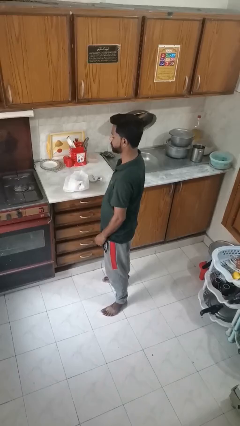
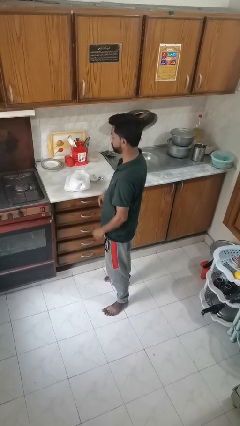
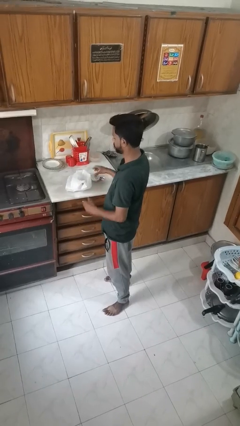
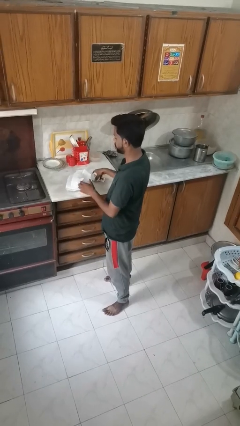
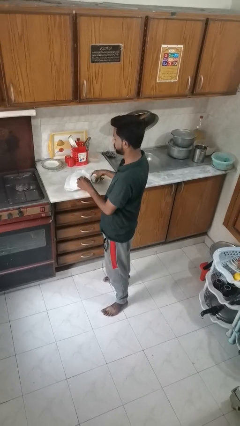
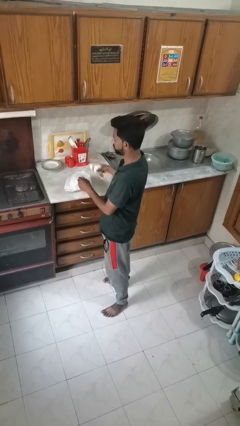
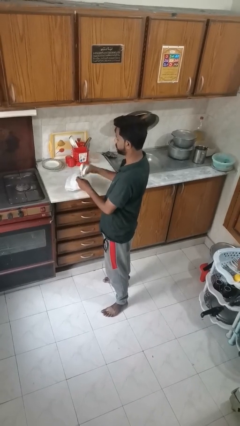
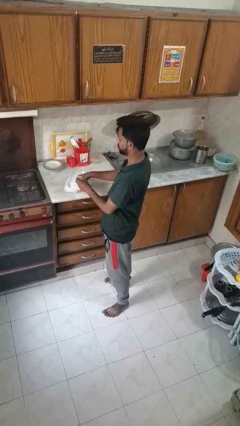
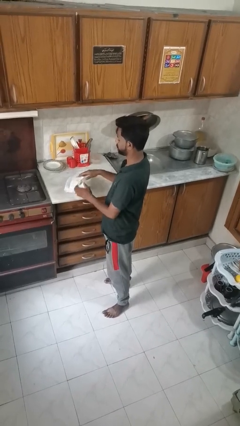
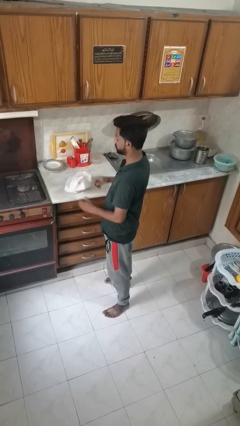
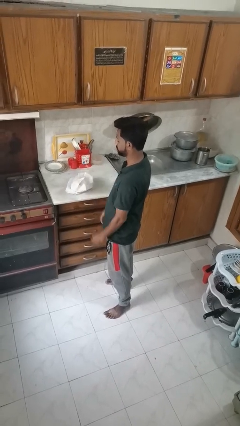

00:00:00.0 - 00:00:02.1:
person puts object into bag

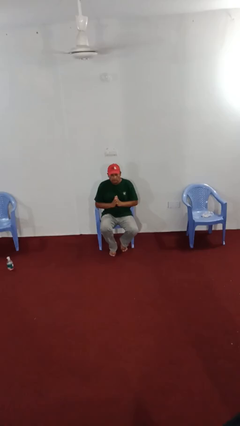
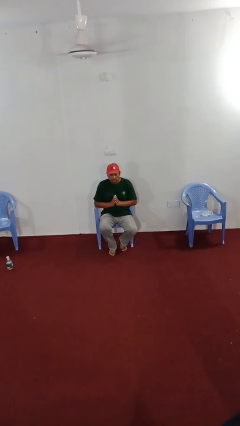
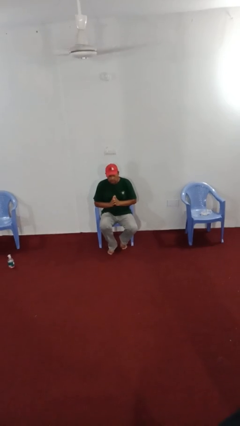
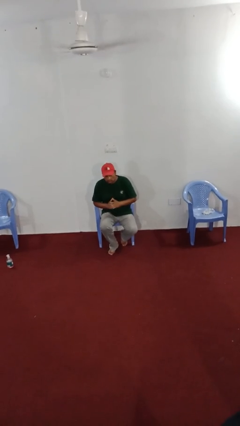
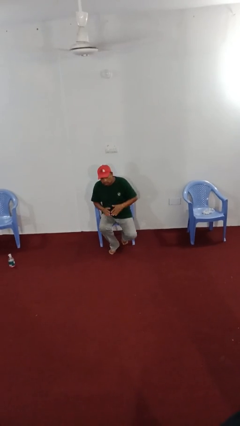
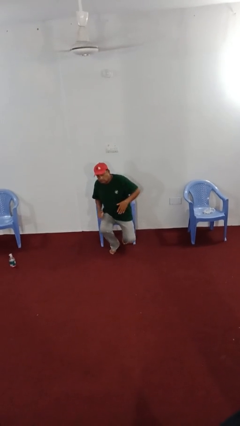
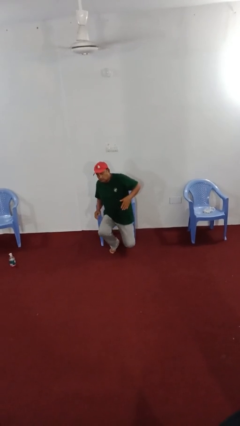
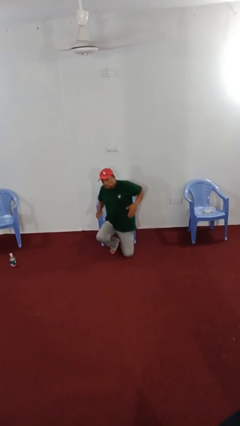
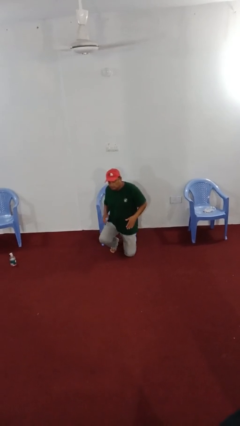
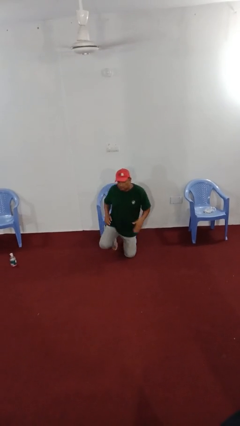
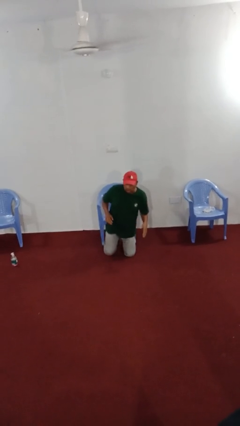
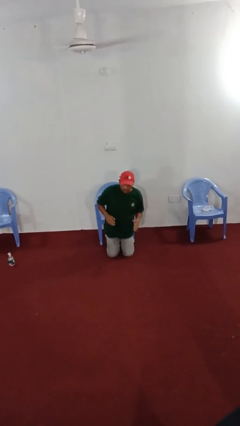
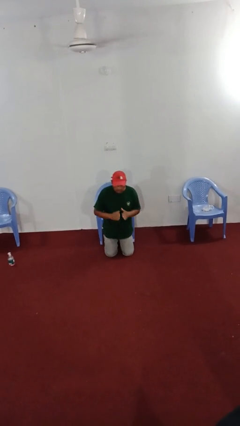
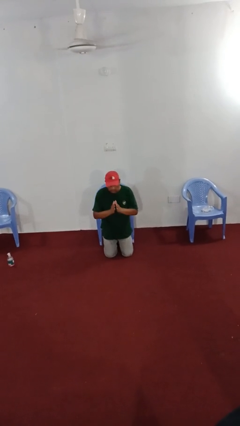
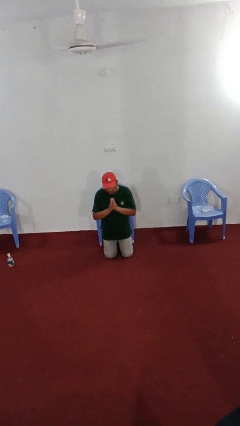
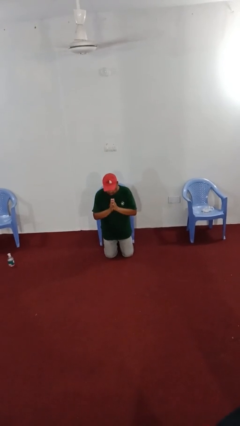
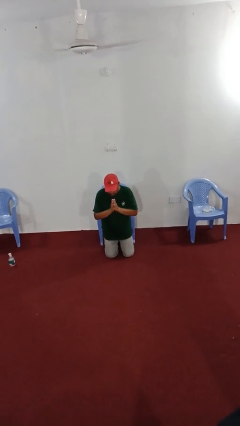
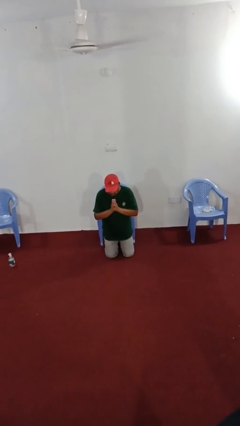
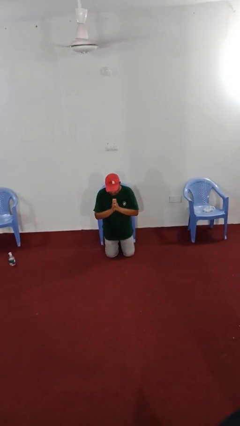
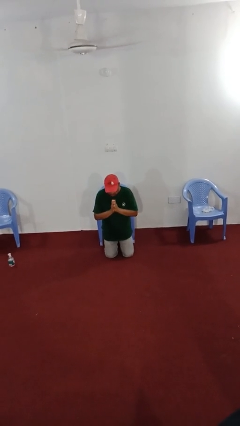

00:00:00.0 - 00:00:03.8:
person prays

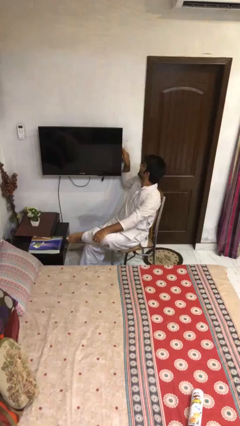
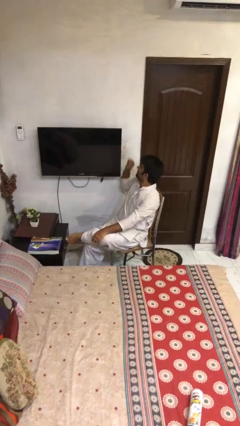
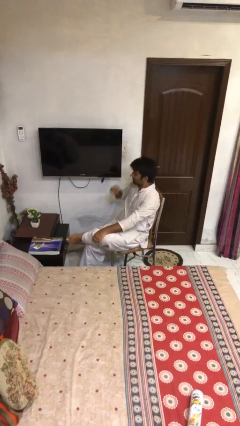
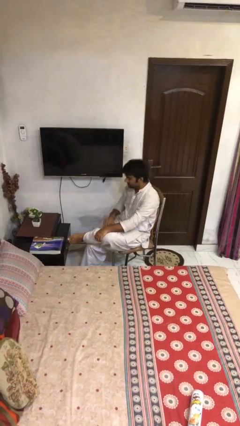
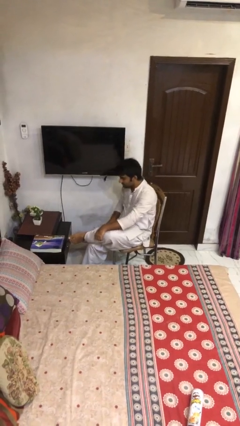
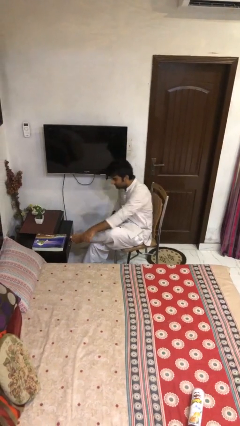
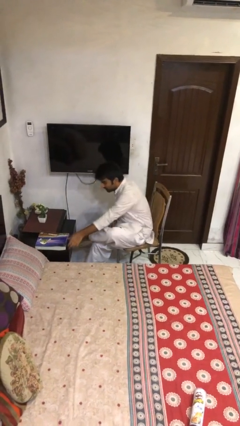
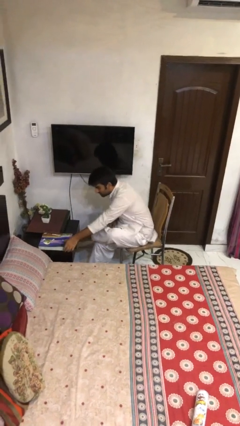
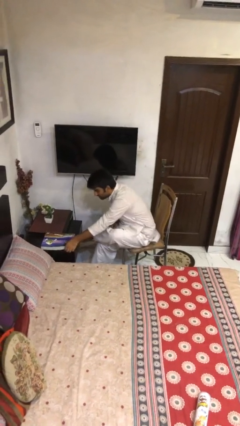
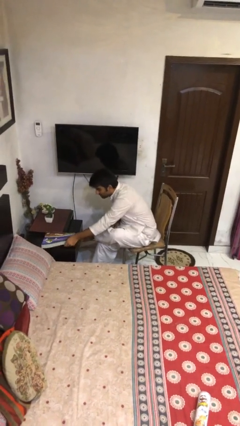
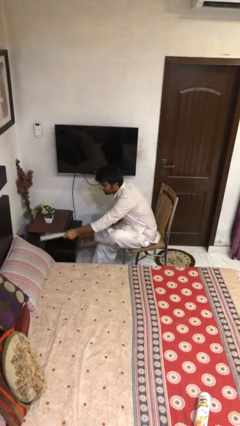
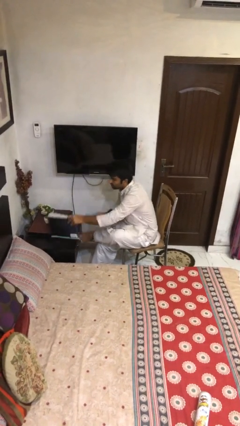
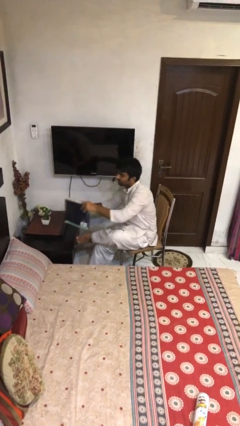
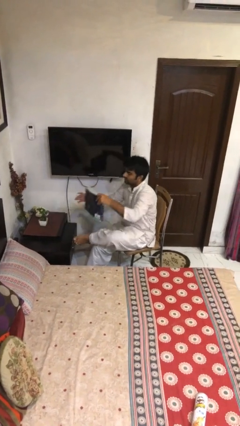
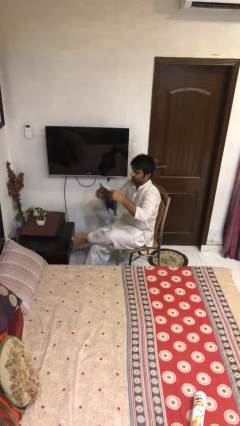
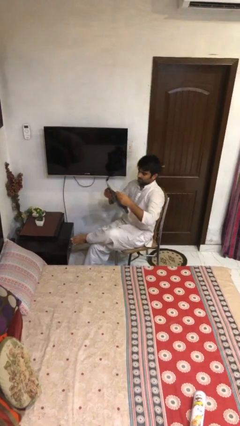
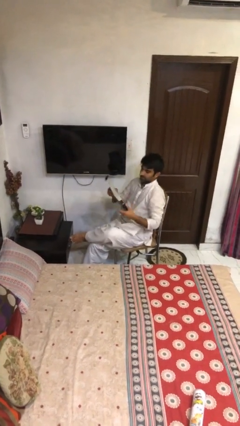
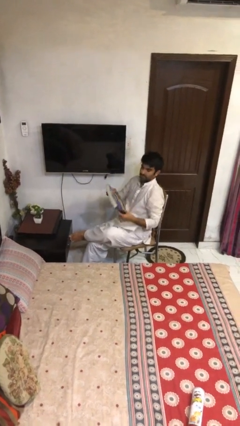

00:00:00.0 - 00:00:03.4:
person picks up object from table

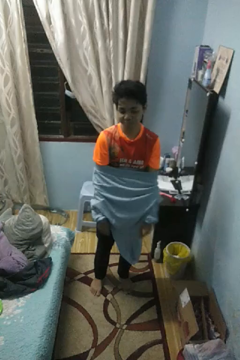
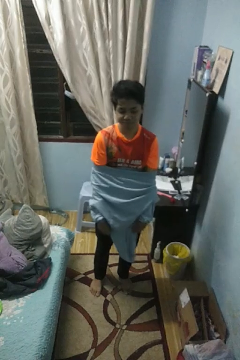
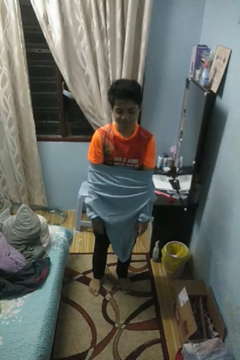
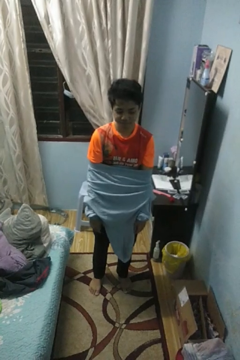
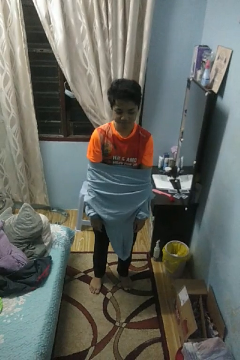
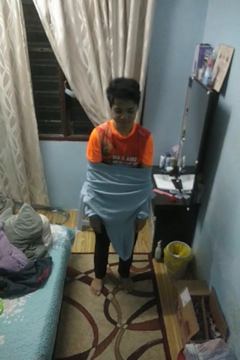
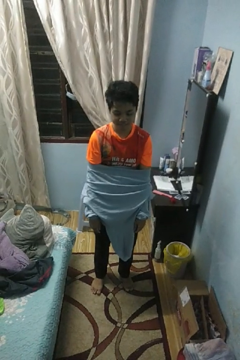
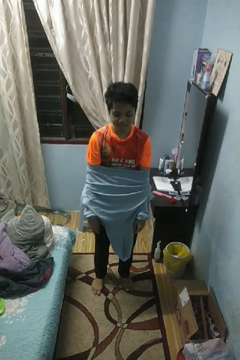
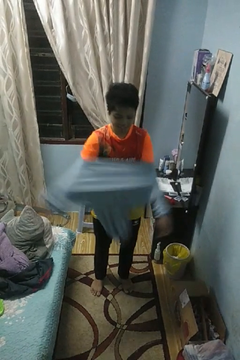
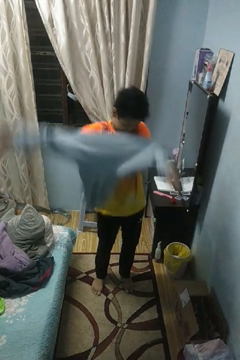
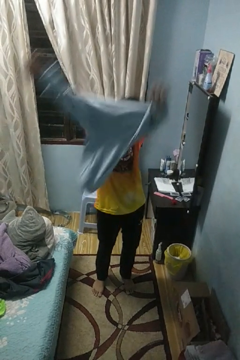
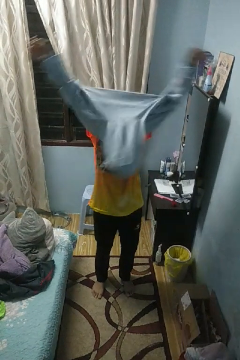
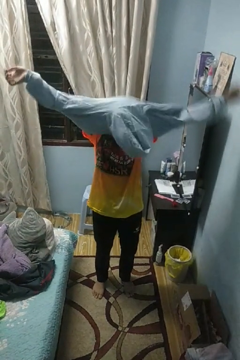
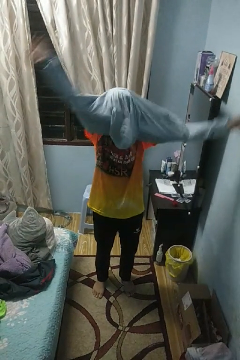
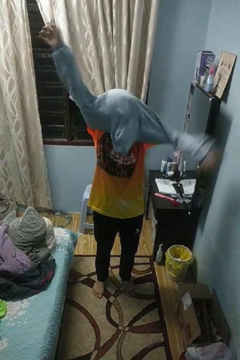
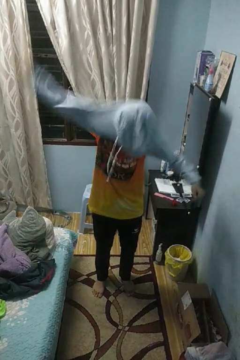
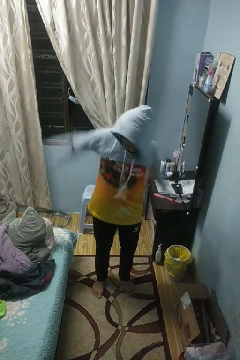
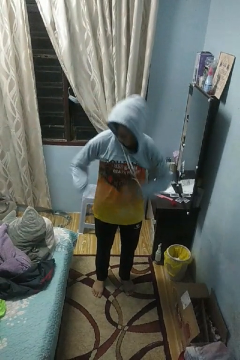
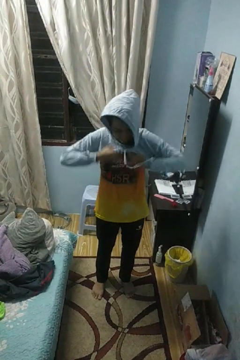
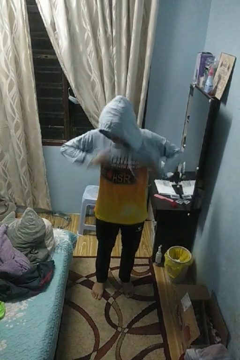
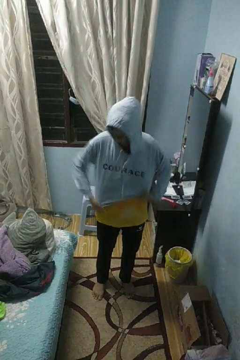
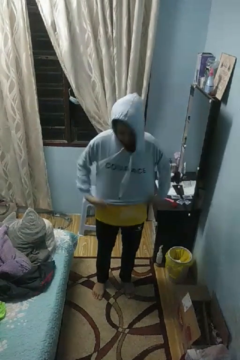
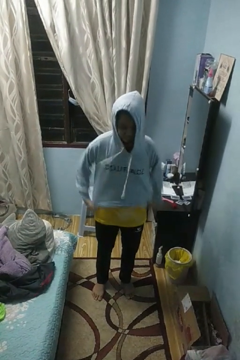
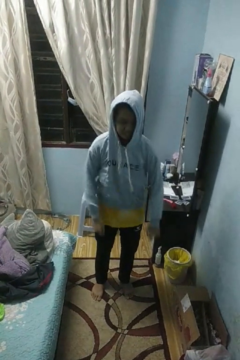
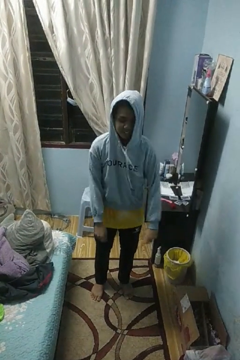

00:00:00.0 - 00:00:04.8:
person puts on hoodie

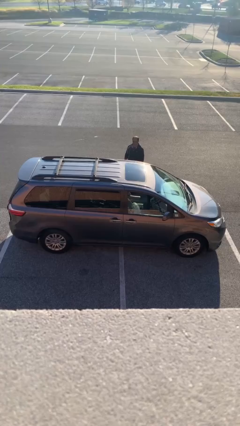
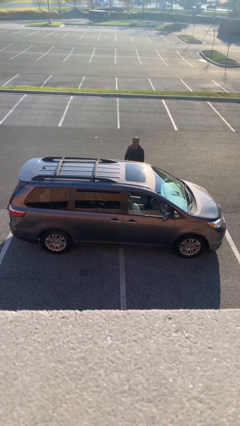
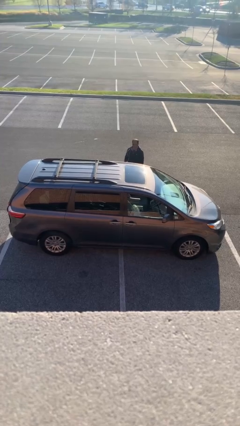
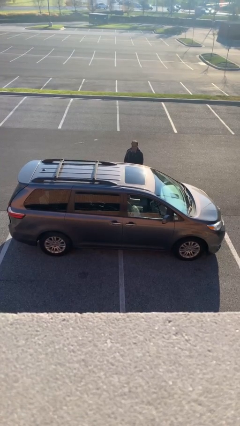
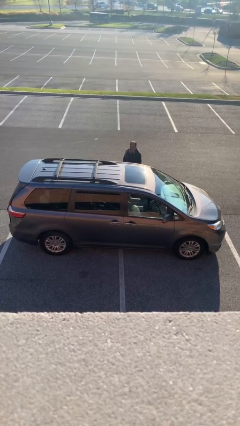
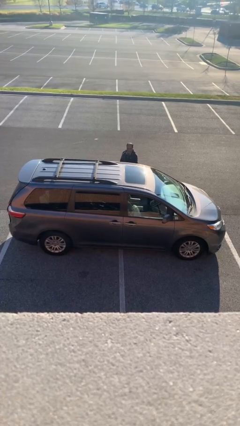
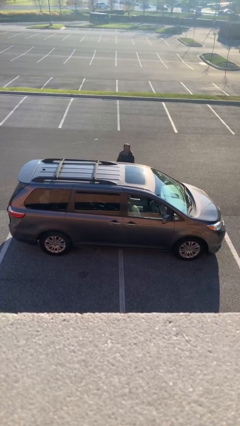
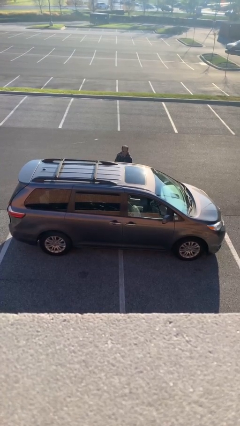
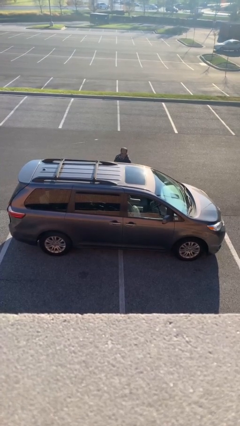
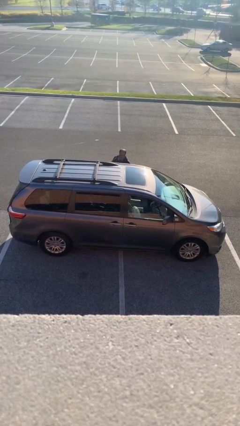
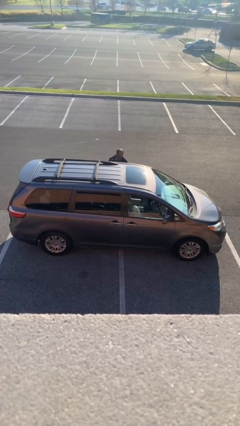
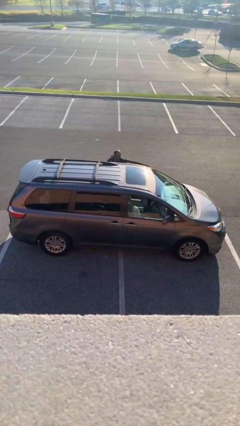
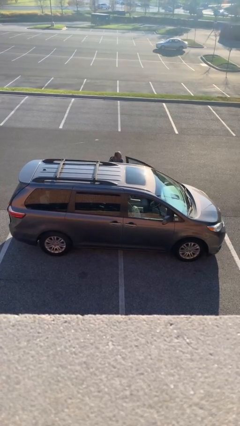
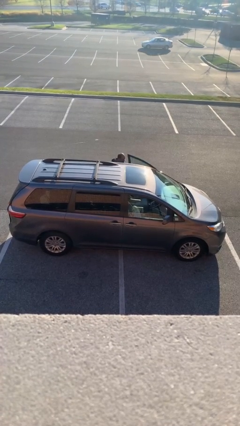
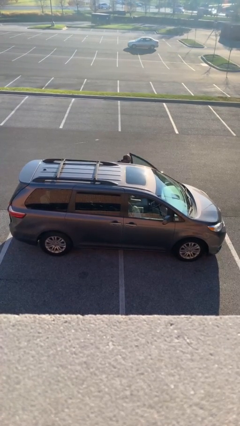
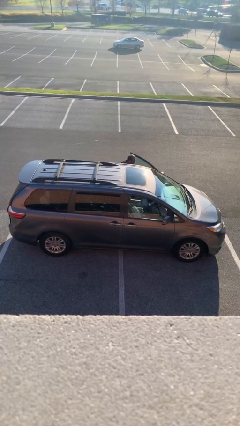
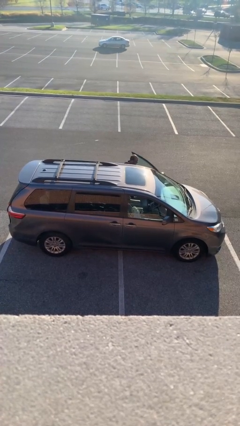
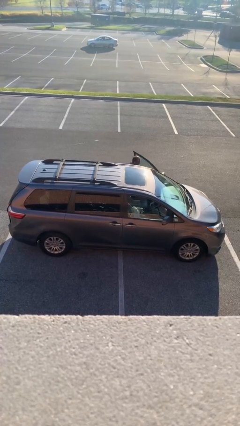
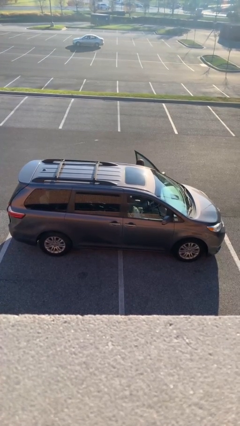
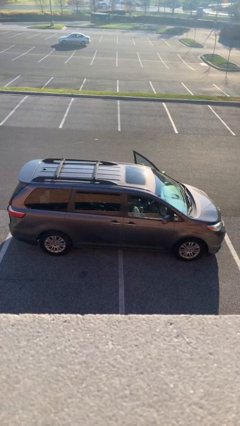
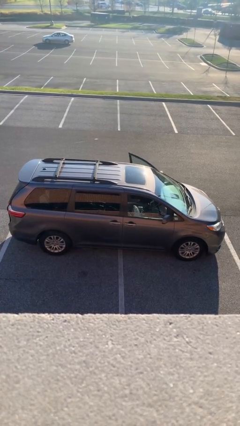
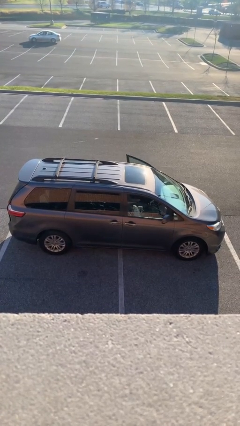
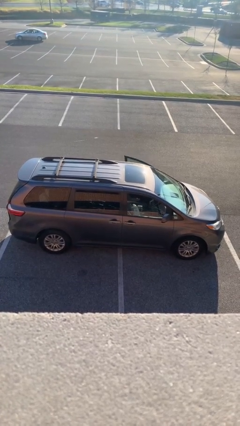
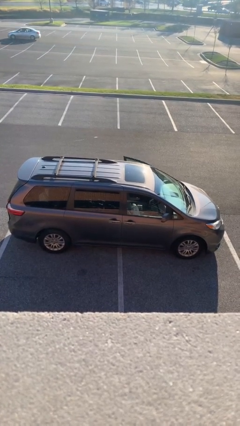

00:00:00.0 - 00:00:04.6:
car picks up person

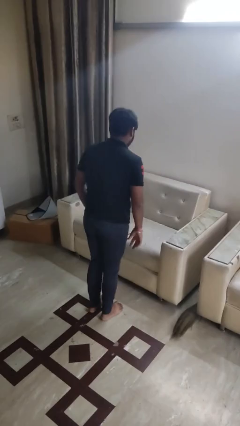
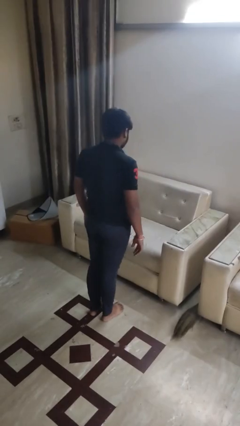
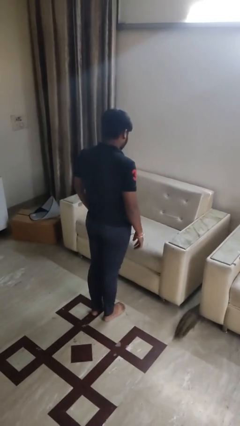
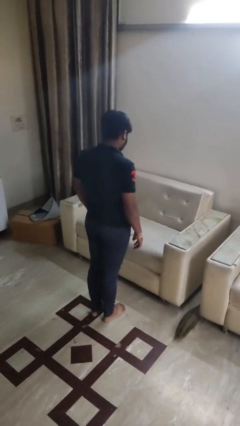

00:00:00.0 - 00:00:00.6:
person stands up
